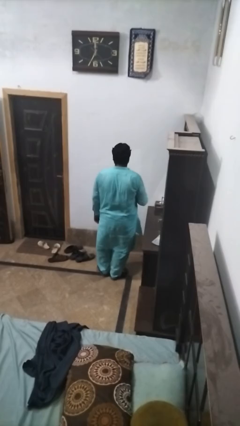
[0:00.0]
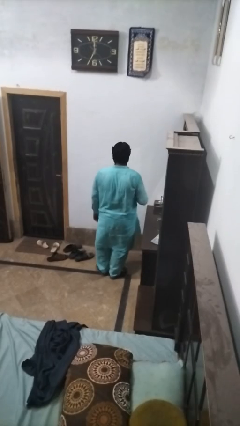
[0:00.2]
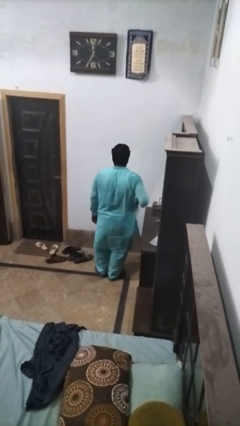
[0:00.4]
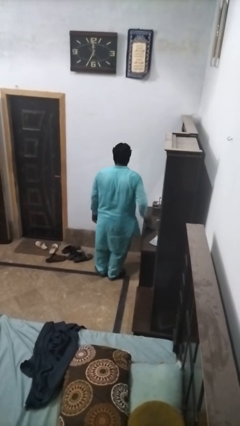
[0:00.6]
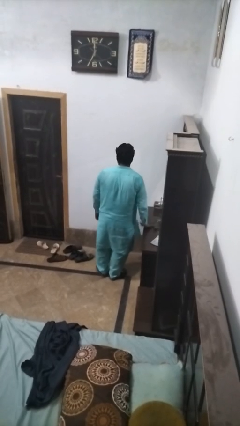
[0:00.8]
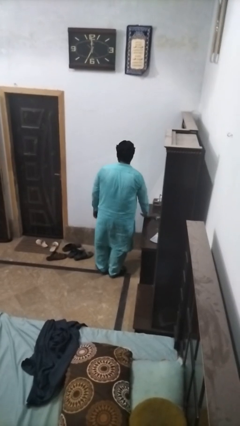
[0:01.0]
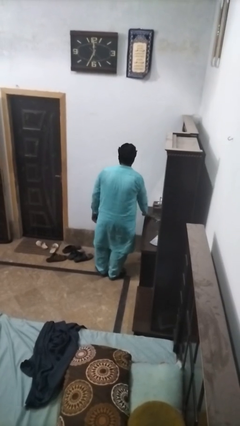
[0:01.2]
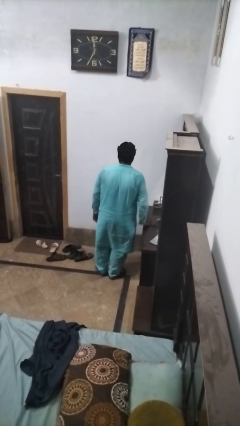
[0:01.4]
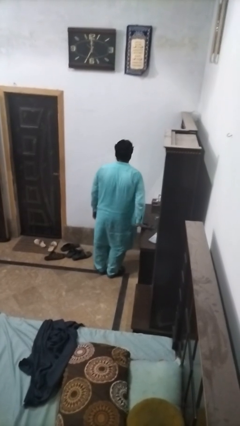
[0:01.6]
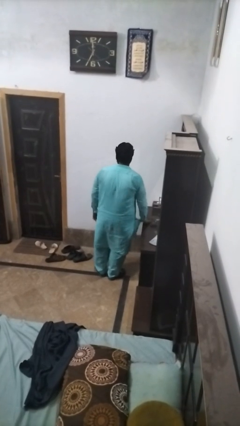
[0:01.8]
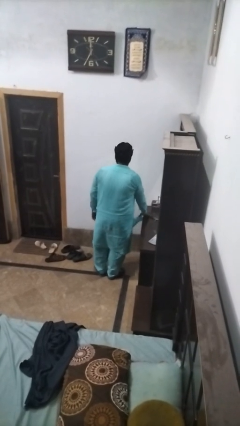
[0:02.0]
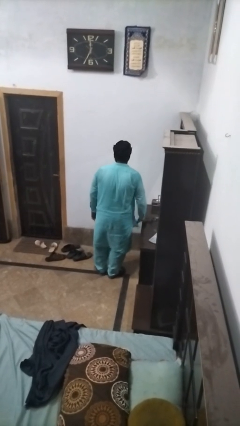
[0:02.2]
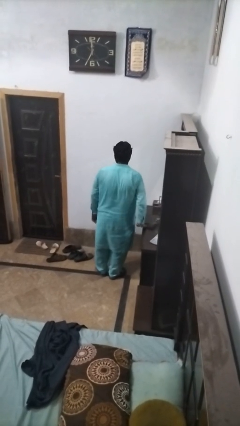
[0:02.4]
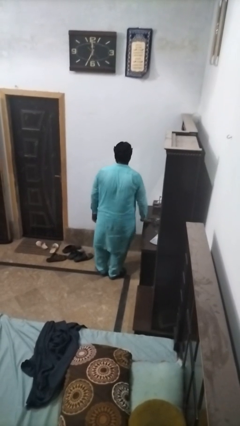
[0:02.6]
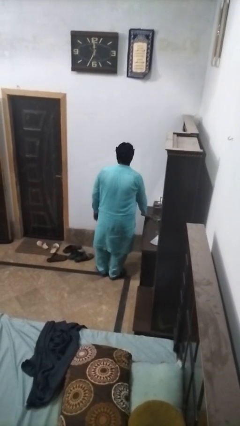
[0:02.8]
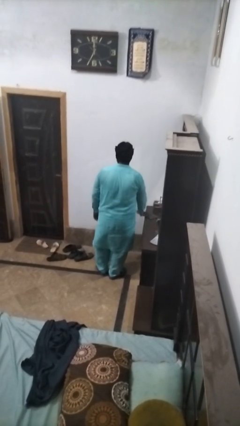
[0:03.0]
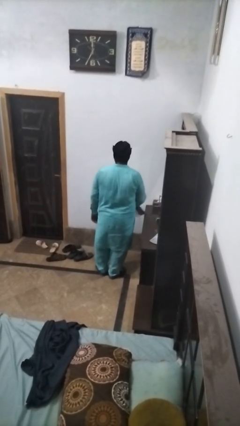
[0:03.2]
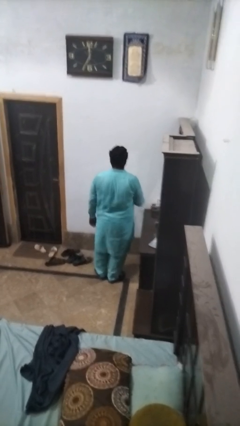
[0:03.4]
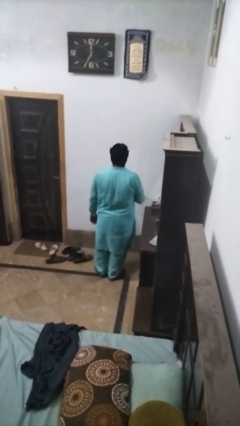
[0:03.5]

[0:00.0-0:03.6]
person cleans table with rag

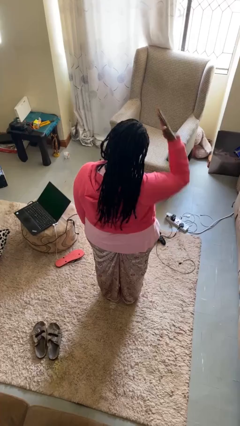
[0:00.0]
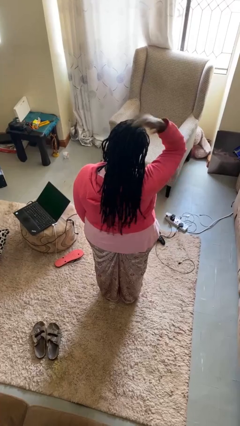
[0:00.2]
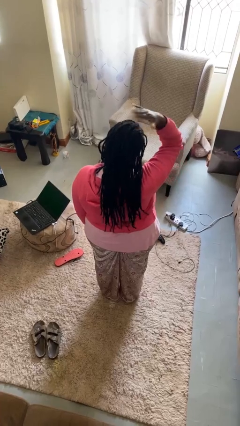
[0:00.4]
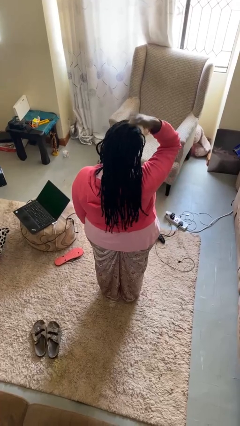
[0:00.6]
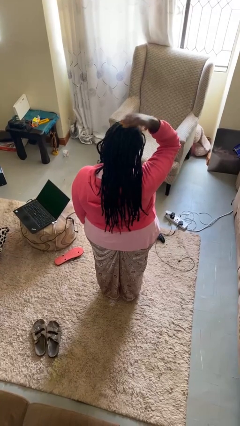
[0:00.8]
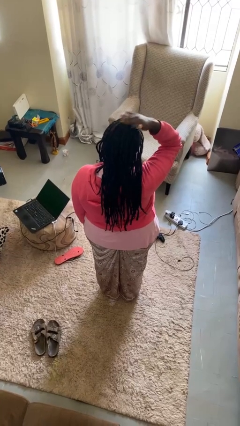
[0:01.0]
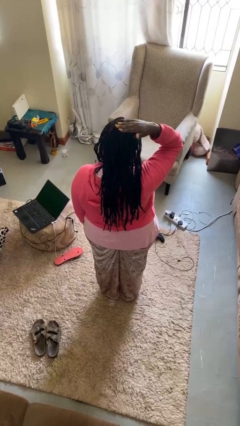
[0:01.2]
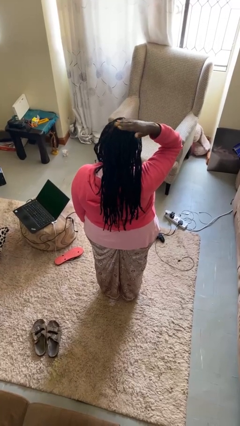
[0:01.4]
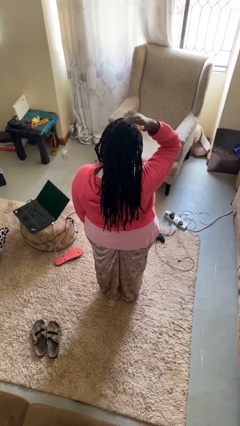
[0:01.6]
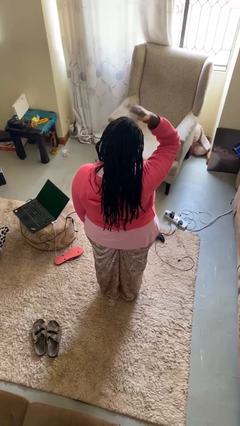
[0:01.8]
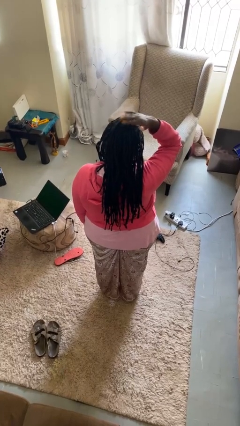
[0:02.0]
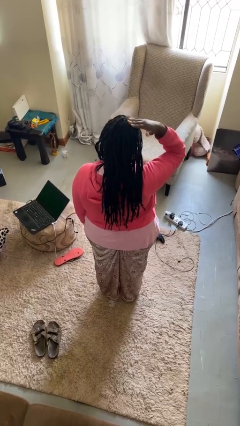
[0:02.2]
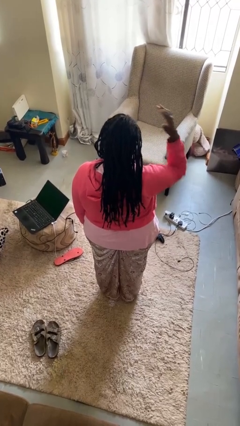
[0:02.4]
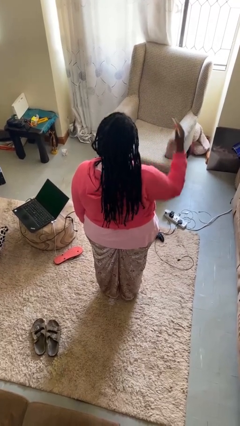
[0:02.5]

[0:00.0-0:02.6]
person pats head

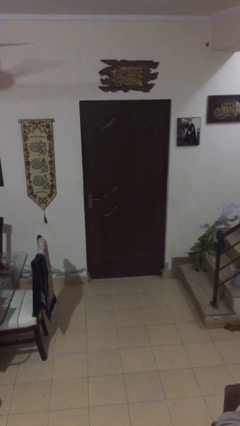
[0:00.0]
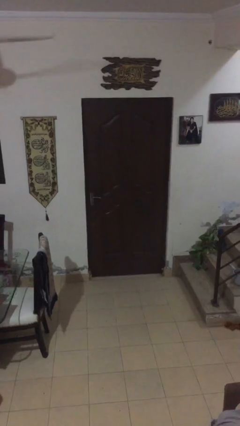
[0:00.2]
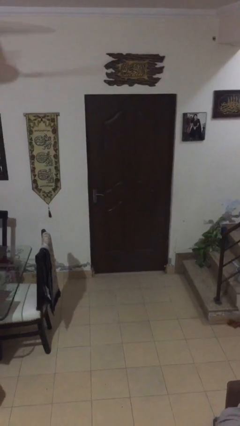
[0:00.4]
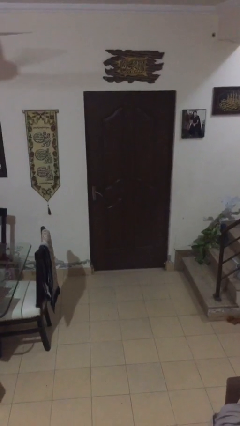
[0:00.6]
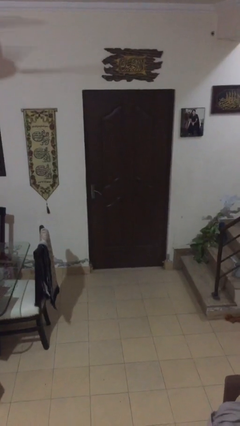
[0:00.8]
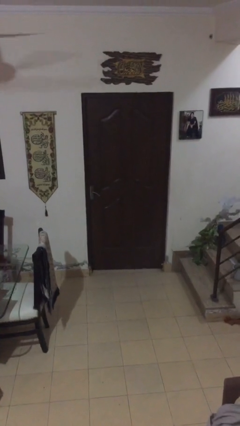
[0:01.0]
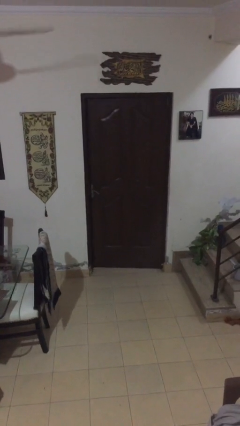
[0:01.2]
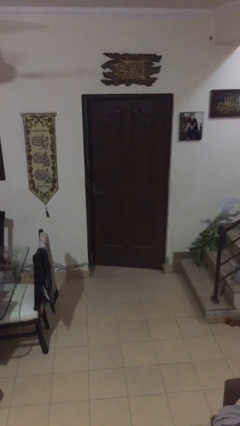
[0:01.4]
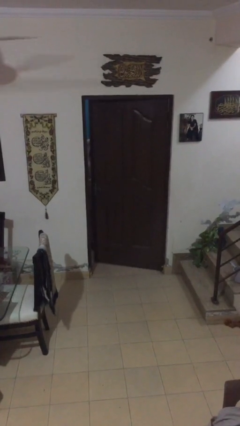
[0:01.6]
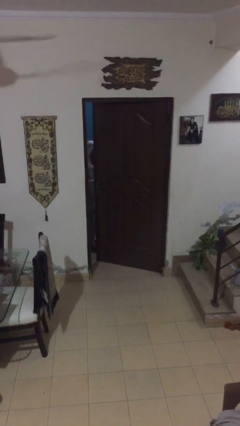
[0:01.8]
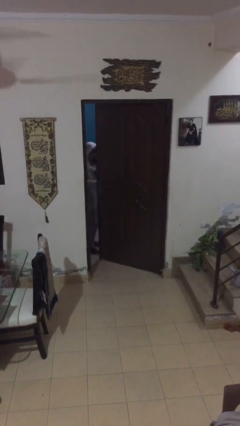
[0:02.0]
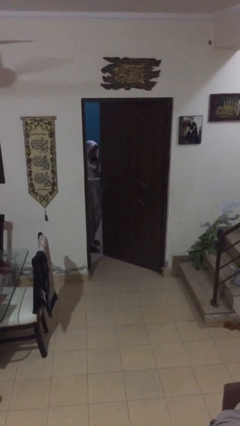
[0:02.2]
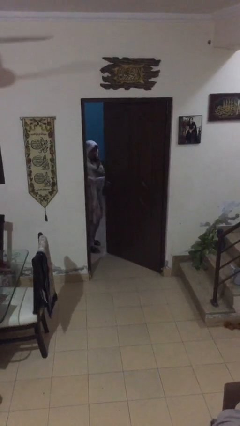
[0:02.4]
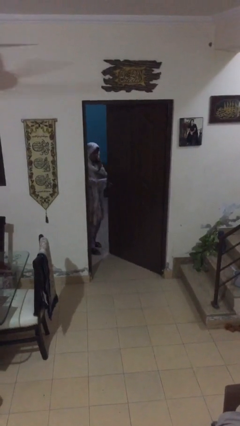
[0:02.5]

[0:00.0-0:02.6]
person opens facility door

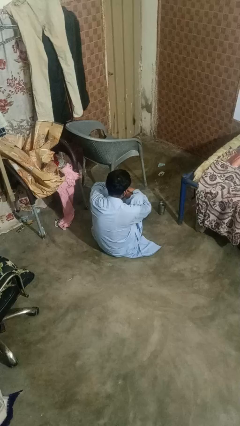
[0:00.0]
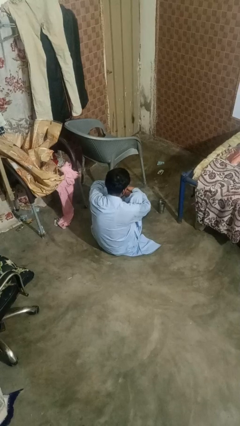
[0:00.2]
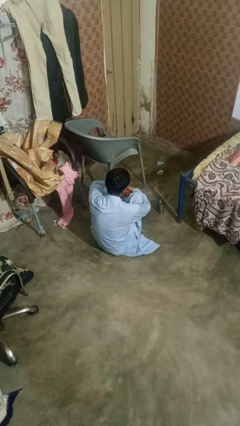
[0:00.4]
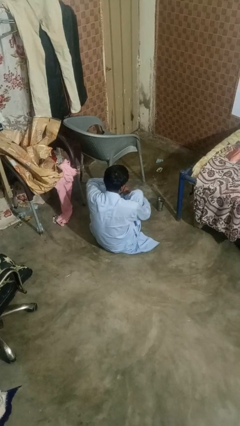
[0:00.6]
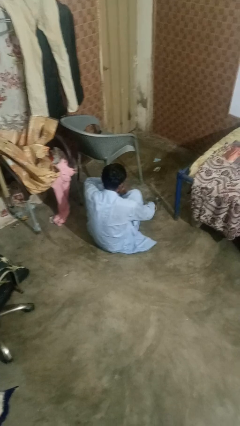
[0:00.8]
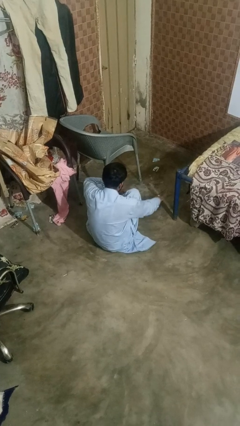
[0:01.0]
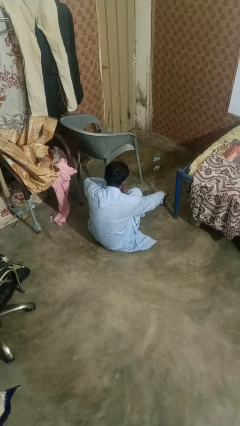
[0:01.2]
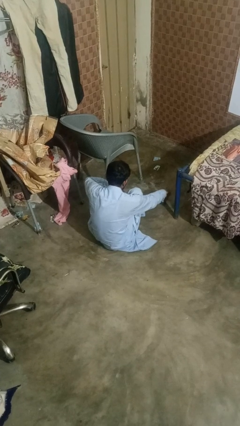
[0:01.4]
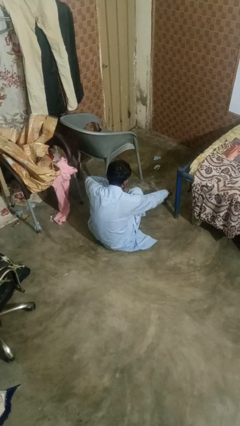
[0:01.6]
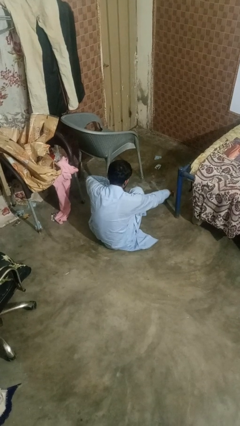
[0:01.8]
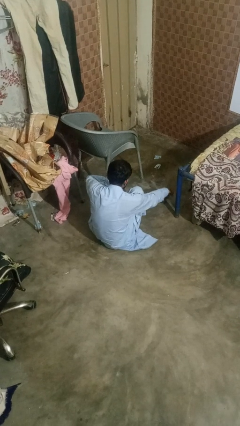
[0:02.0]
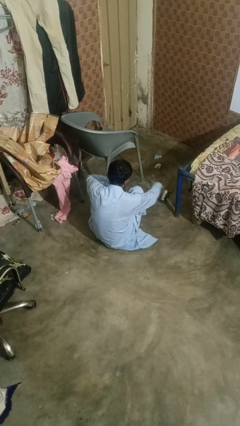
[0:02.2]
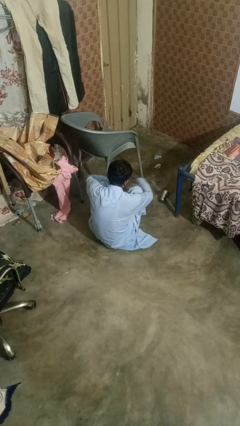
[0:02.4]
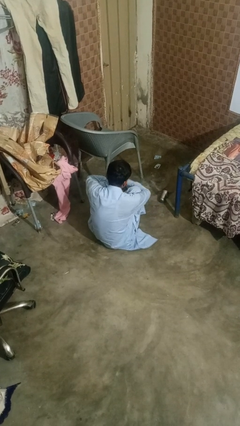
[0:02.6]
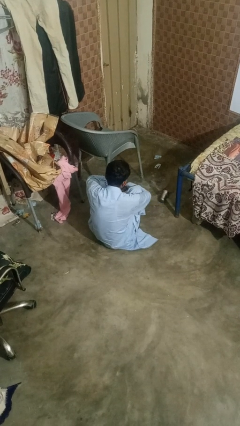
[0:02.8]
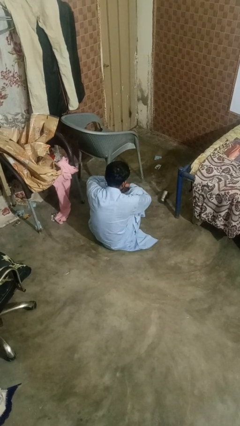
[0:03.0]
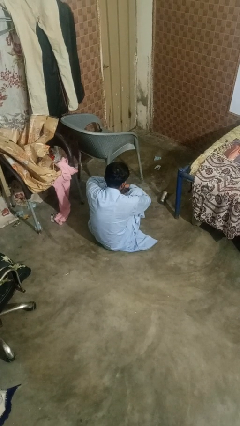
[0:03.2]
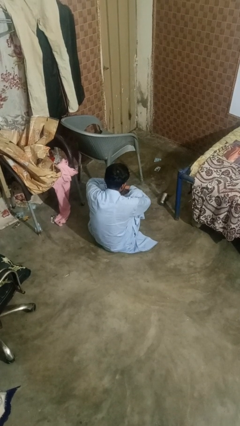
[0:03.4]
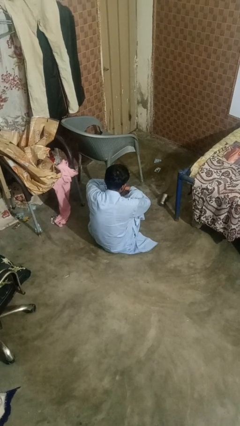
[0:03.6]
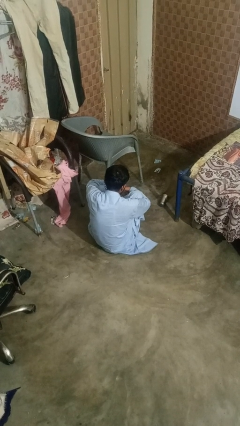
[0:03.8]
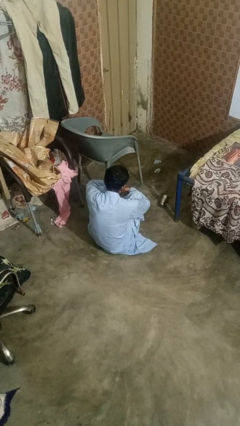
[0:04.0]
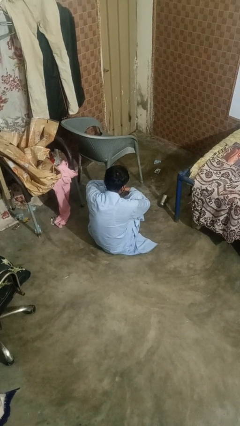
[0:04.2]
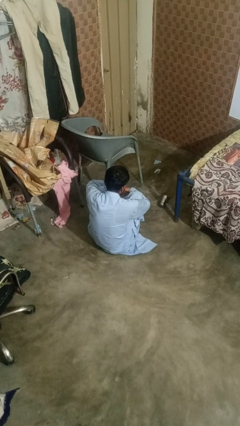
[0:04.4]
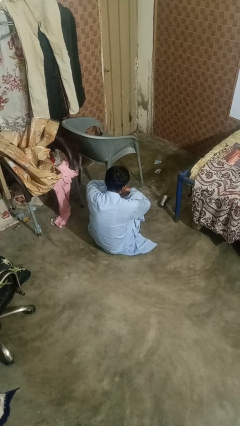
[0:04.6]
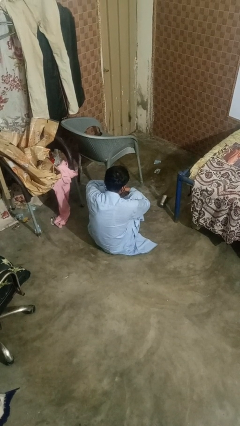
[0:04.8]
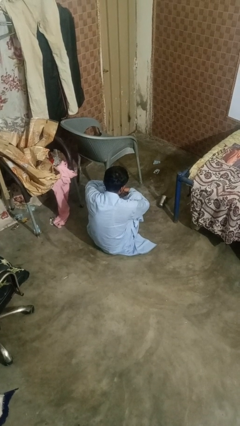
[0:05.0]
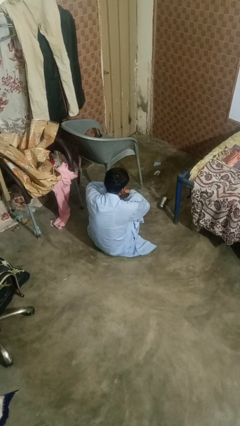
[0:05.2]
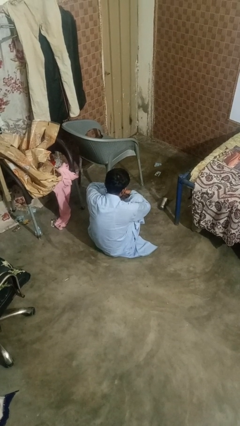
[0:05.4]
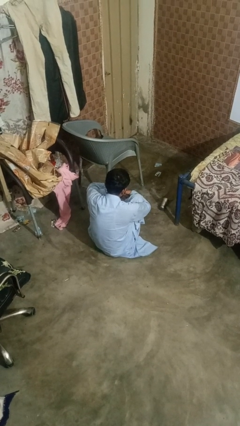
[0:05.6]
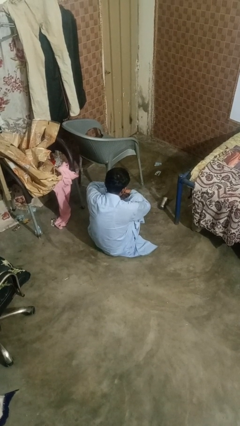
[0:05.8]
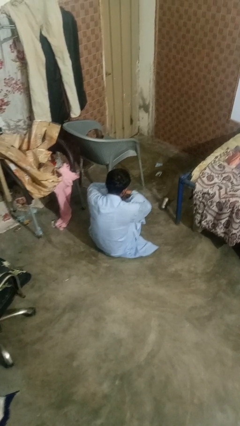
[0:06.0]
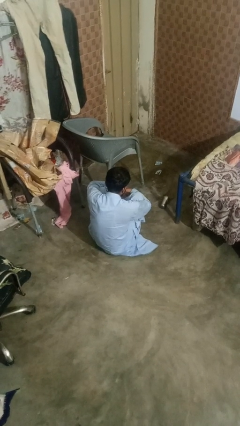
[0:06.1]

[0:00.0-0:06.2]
person spills on floor

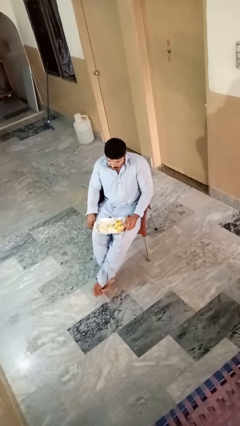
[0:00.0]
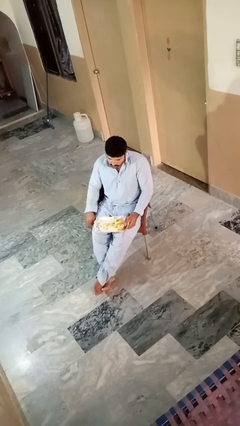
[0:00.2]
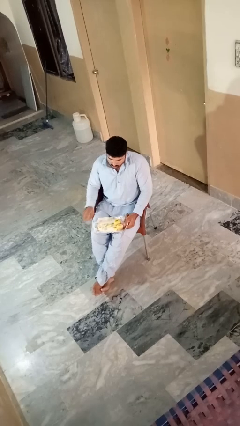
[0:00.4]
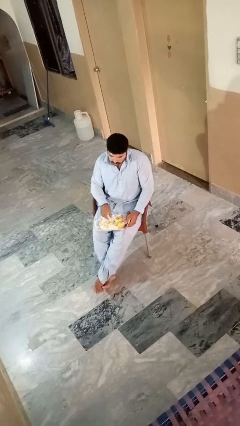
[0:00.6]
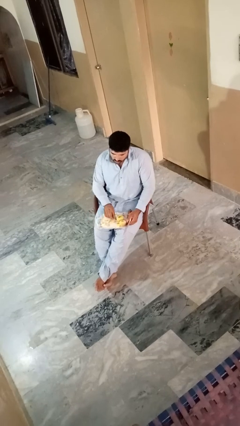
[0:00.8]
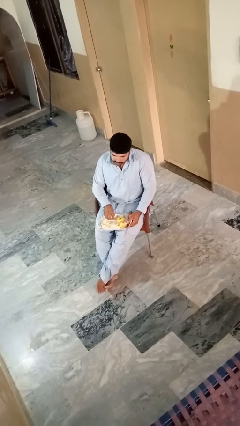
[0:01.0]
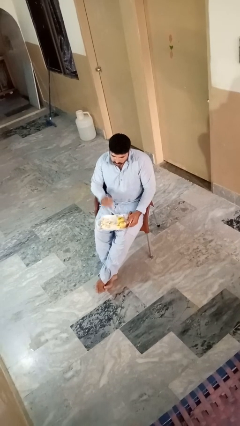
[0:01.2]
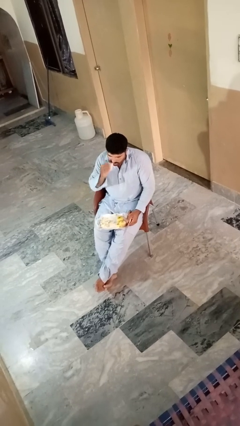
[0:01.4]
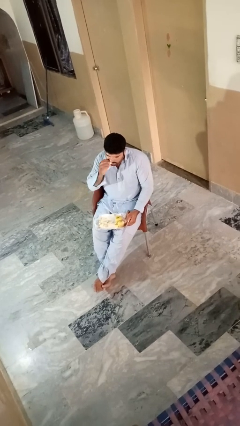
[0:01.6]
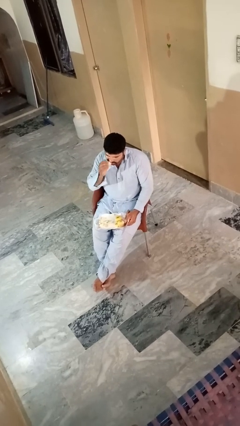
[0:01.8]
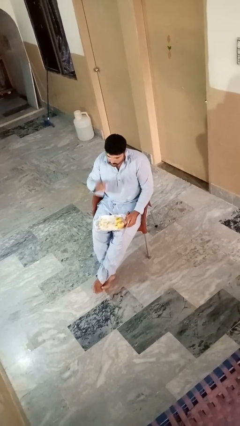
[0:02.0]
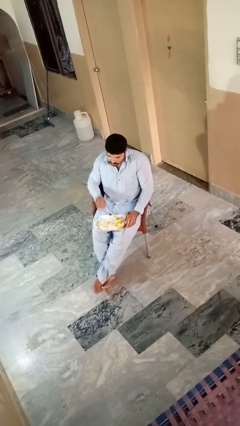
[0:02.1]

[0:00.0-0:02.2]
person eats apple

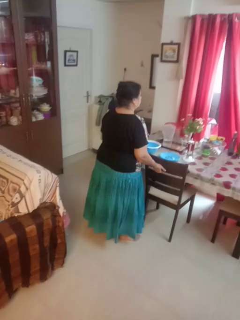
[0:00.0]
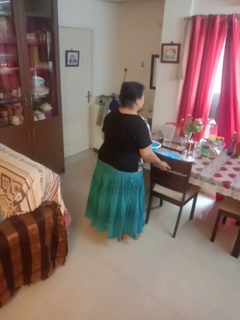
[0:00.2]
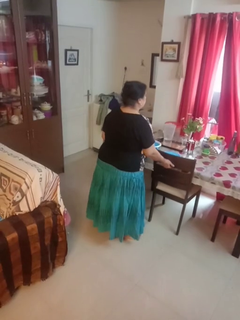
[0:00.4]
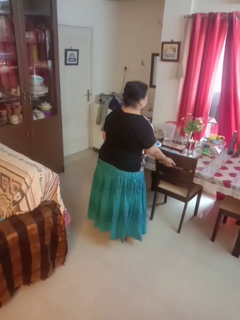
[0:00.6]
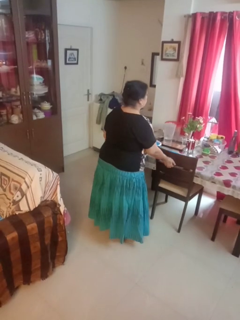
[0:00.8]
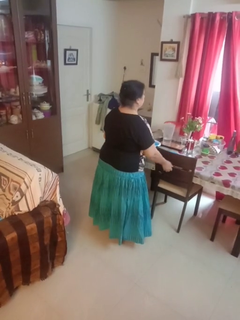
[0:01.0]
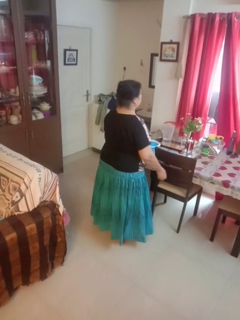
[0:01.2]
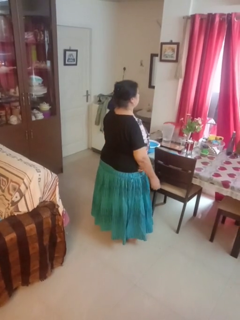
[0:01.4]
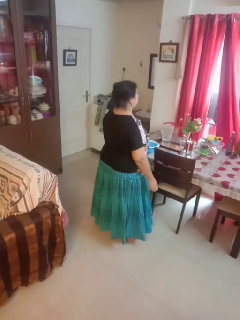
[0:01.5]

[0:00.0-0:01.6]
person pushes in chair
